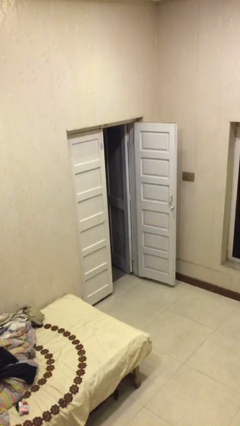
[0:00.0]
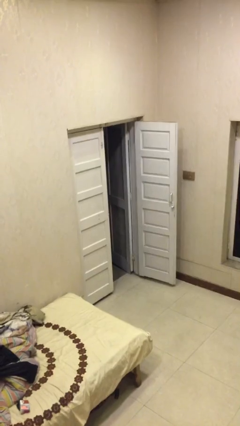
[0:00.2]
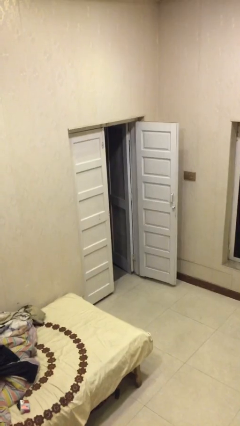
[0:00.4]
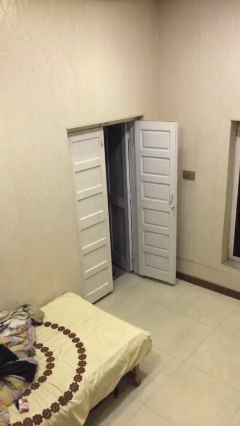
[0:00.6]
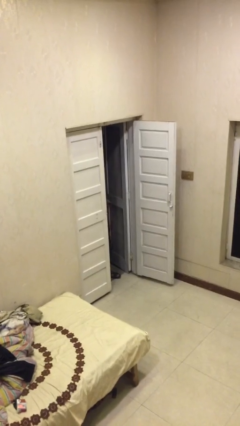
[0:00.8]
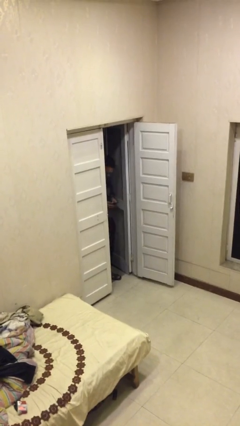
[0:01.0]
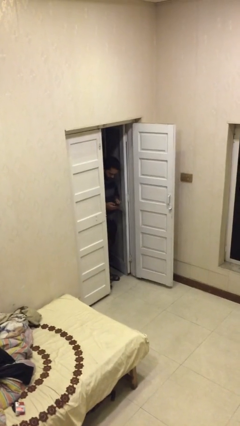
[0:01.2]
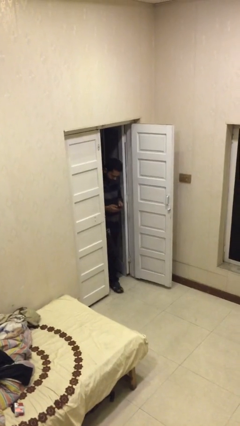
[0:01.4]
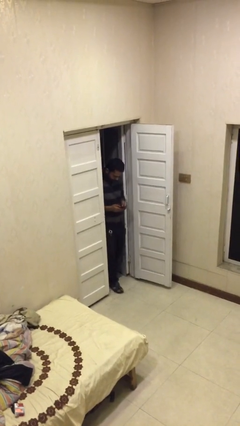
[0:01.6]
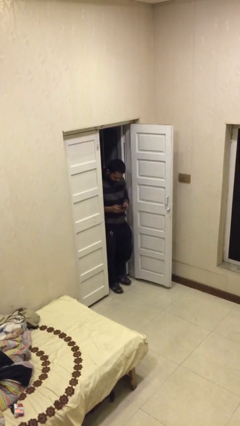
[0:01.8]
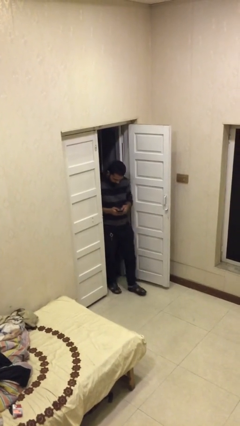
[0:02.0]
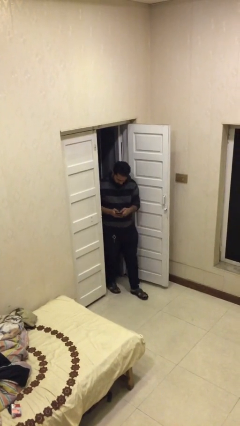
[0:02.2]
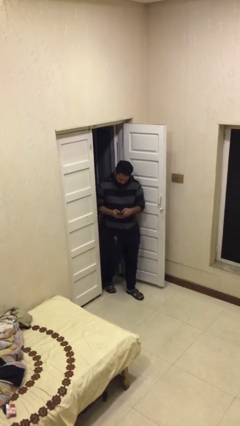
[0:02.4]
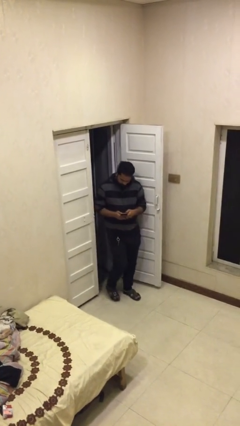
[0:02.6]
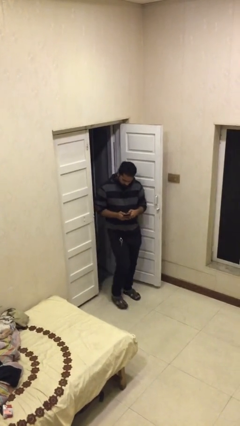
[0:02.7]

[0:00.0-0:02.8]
person enters scene through structure

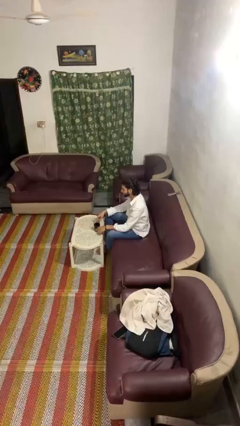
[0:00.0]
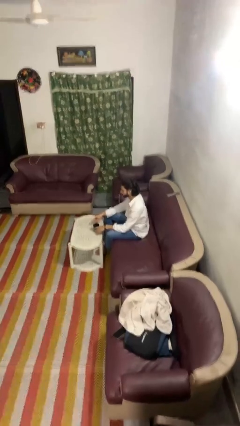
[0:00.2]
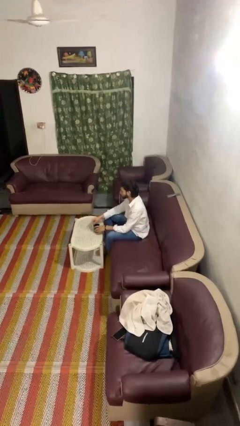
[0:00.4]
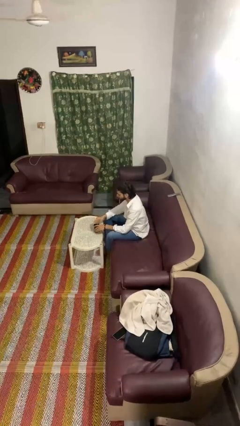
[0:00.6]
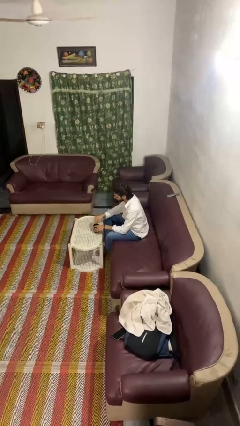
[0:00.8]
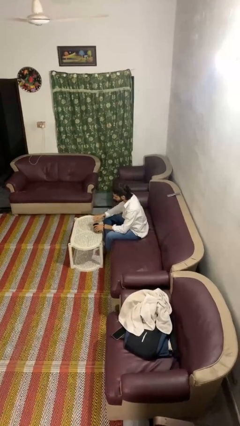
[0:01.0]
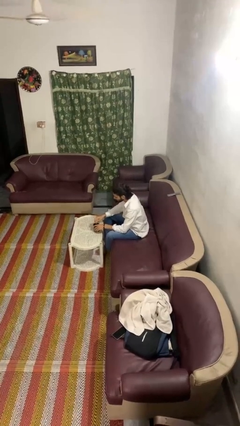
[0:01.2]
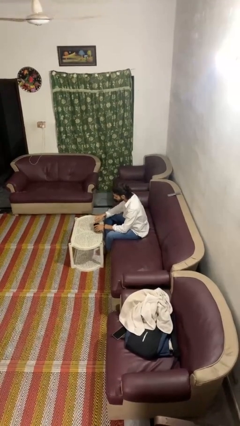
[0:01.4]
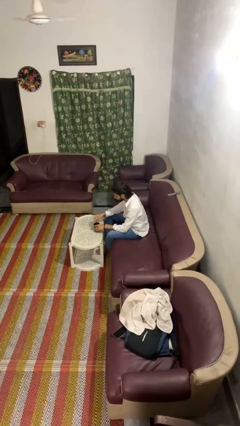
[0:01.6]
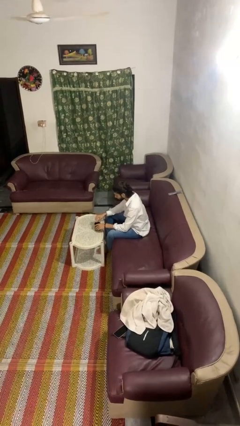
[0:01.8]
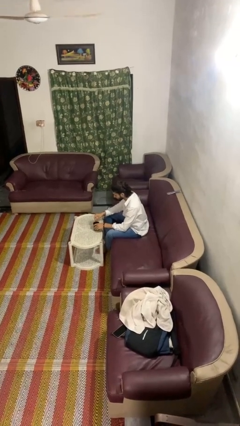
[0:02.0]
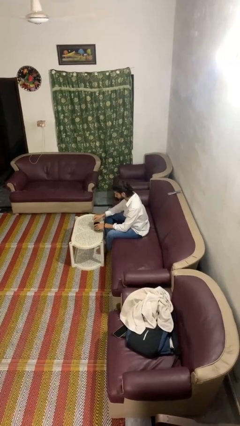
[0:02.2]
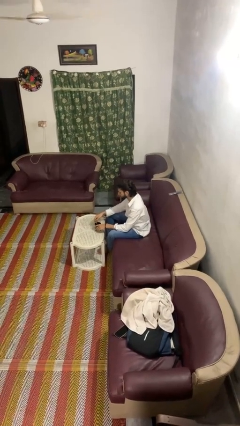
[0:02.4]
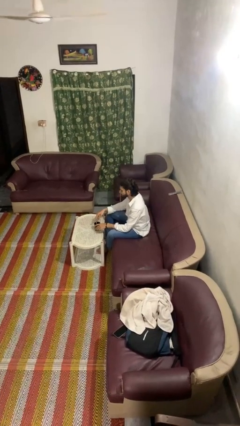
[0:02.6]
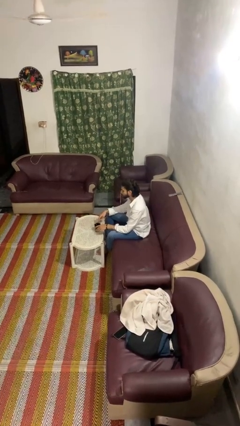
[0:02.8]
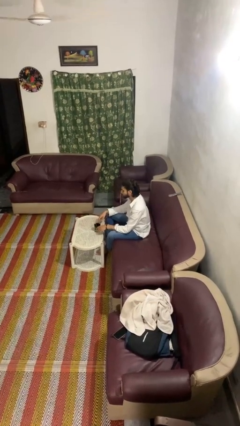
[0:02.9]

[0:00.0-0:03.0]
person stirs mug

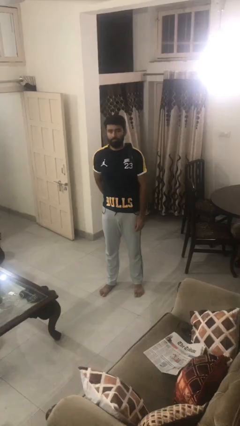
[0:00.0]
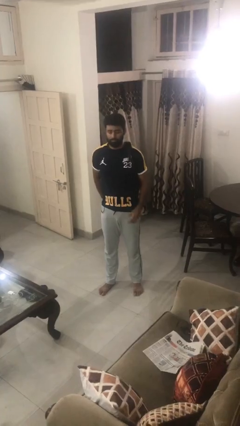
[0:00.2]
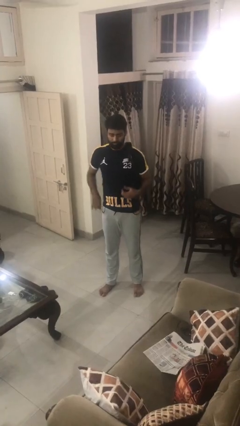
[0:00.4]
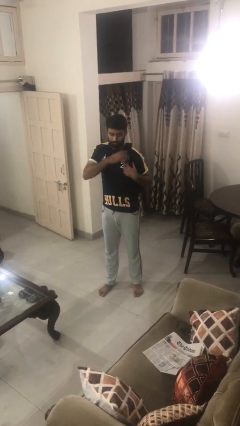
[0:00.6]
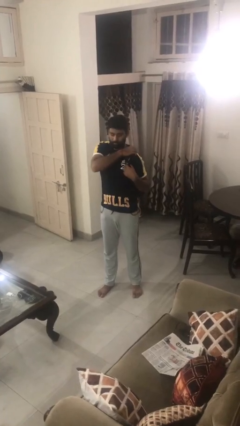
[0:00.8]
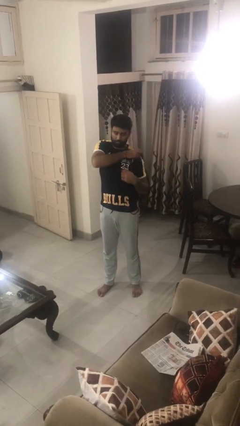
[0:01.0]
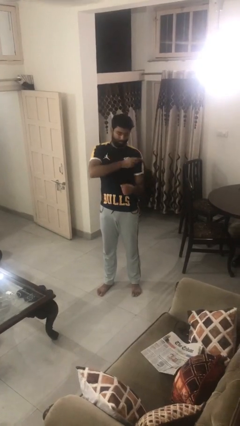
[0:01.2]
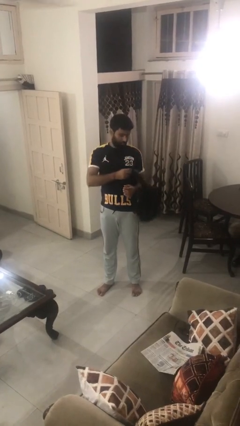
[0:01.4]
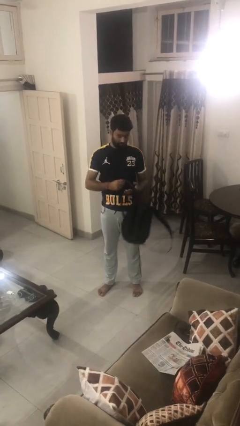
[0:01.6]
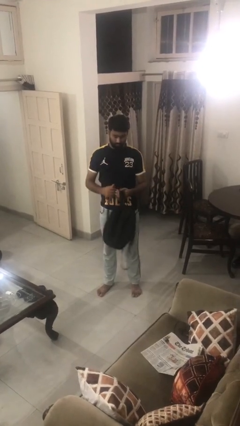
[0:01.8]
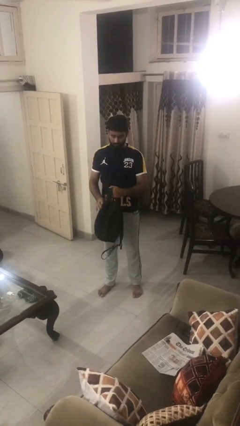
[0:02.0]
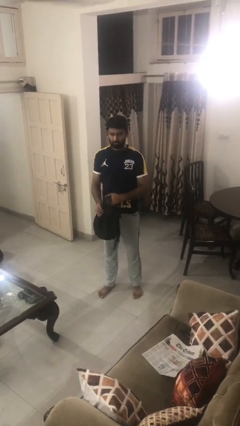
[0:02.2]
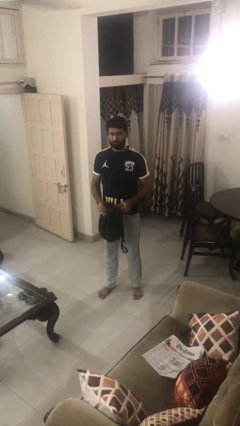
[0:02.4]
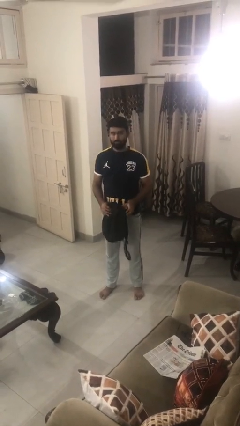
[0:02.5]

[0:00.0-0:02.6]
person takes off backpack

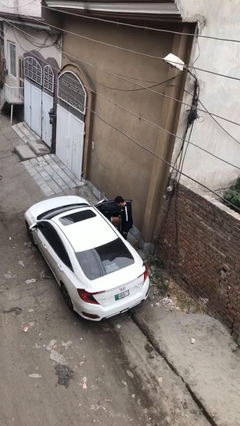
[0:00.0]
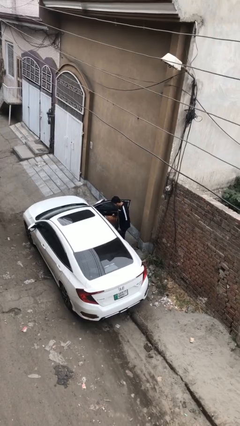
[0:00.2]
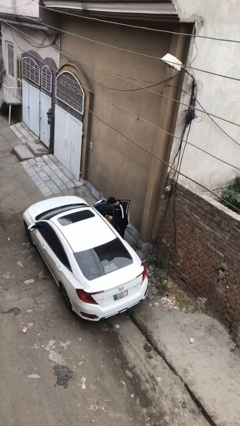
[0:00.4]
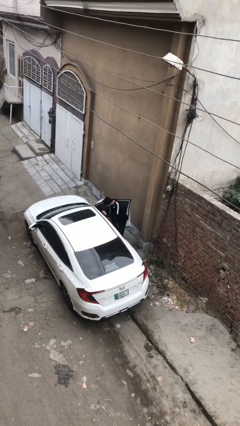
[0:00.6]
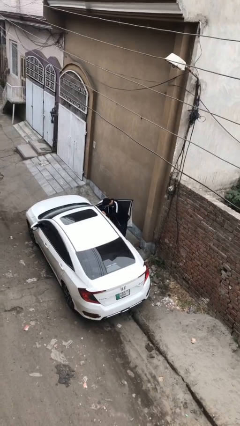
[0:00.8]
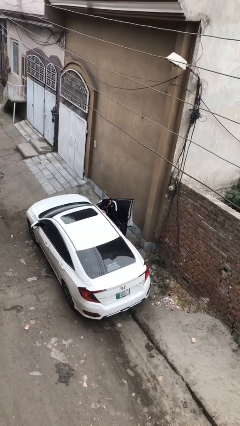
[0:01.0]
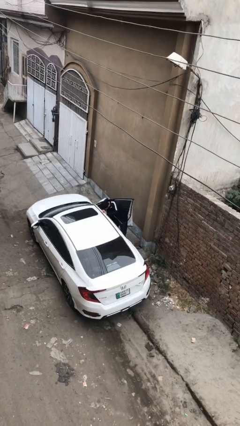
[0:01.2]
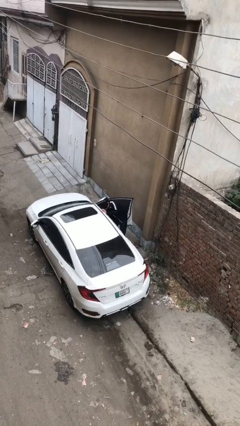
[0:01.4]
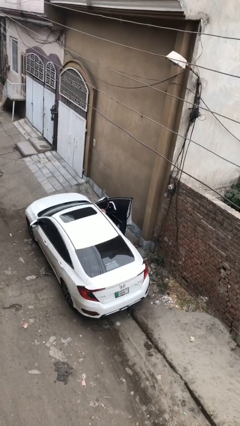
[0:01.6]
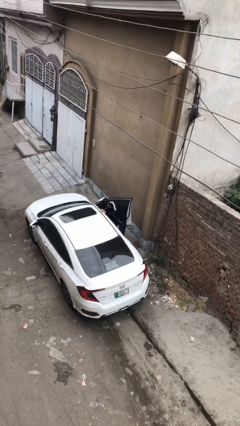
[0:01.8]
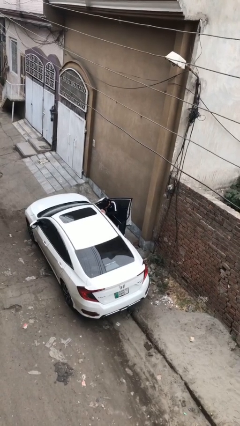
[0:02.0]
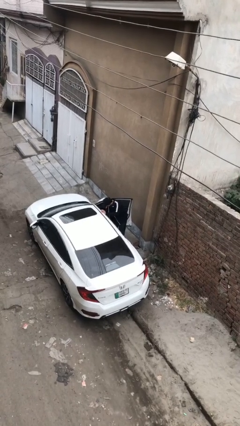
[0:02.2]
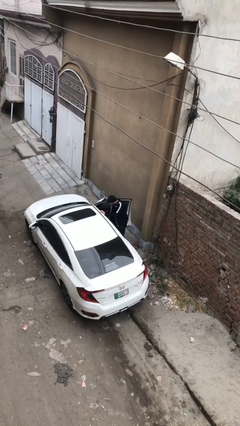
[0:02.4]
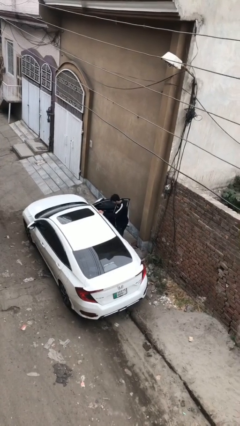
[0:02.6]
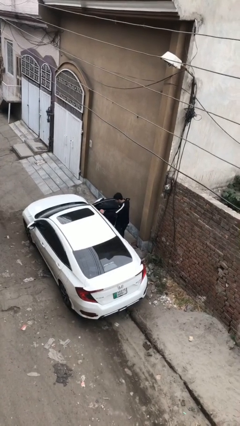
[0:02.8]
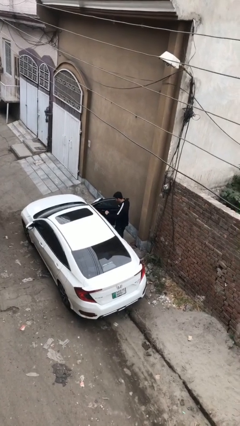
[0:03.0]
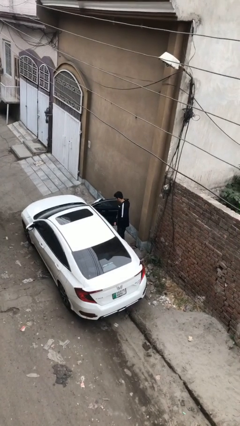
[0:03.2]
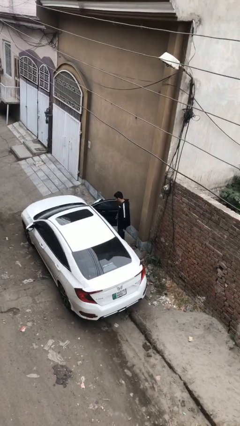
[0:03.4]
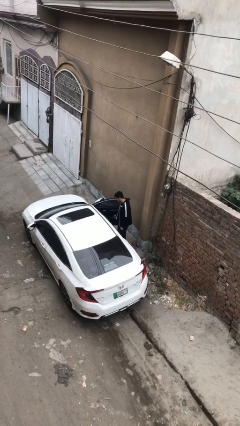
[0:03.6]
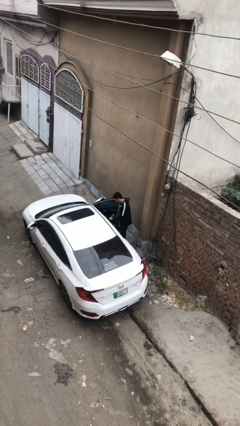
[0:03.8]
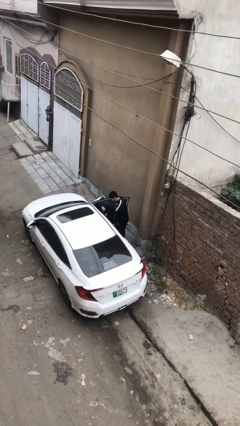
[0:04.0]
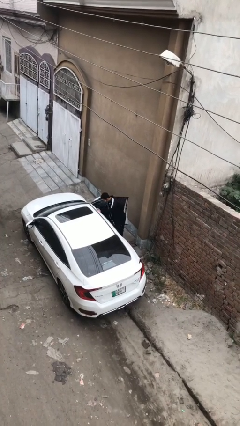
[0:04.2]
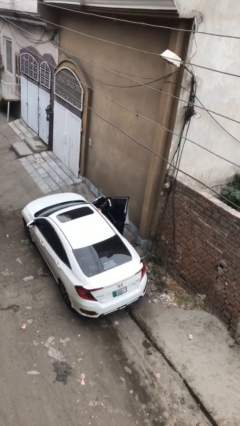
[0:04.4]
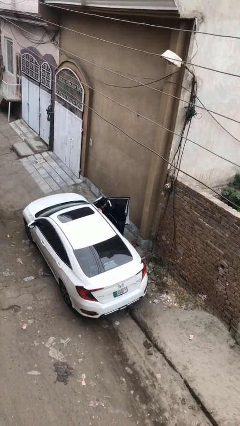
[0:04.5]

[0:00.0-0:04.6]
person loads car

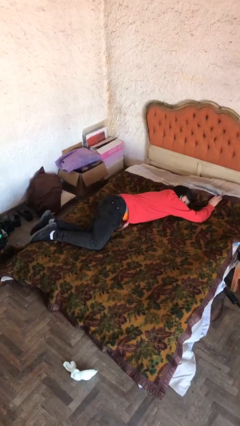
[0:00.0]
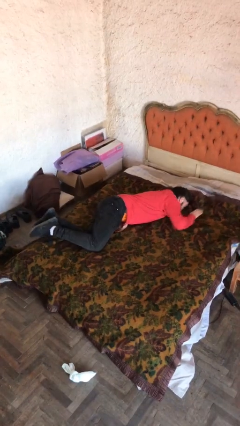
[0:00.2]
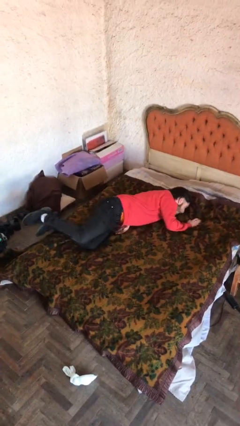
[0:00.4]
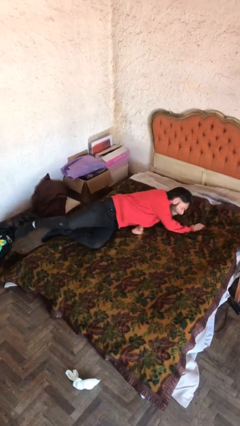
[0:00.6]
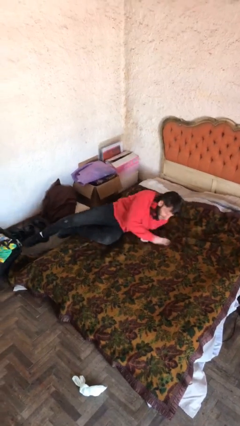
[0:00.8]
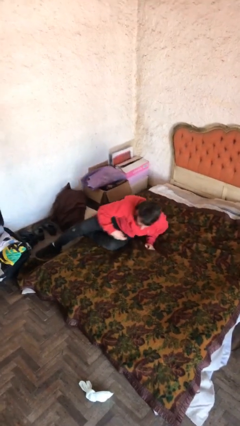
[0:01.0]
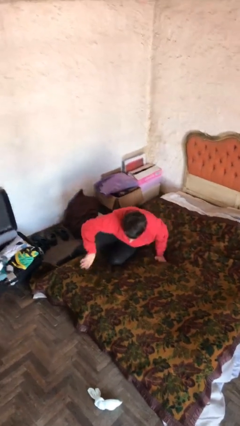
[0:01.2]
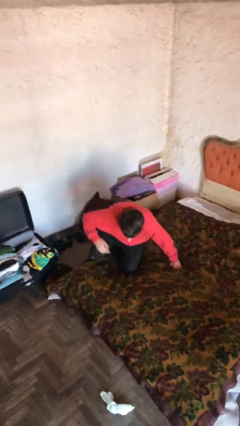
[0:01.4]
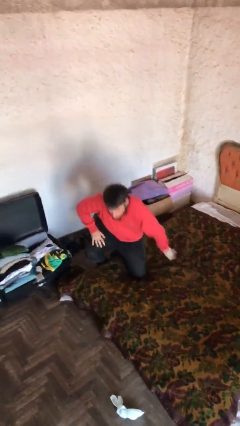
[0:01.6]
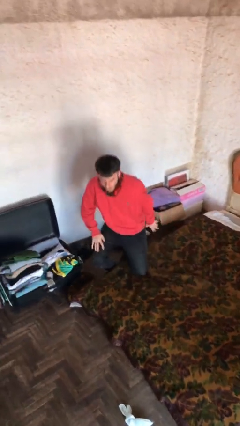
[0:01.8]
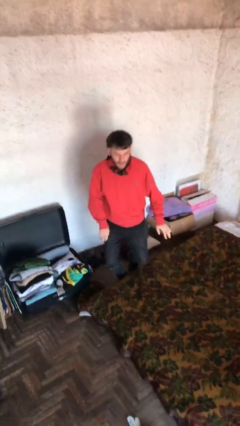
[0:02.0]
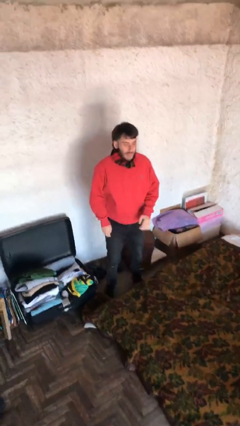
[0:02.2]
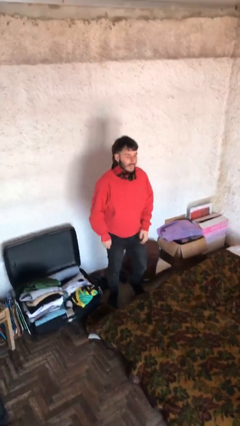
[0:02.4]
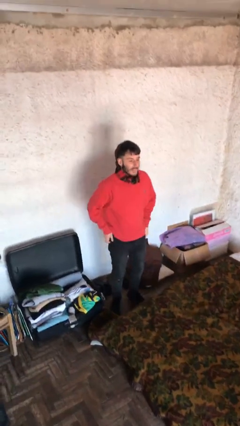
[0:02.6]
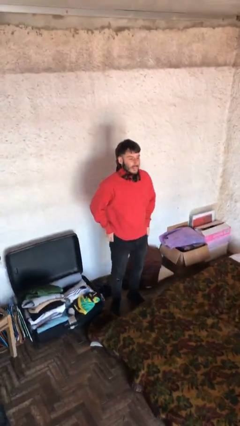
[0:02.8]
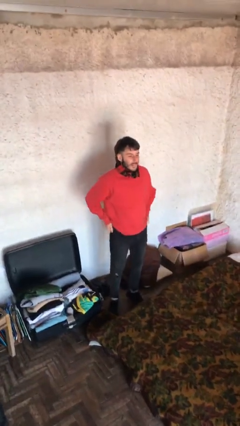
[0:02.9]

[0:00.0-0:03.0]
person stands up

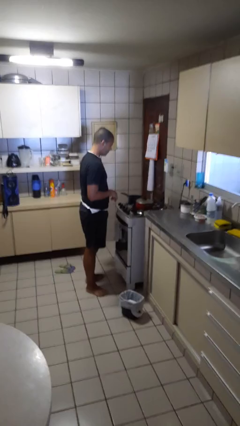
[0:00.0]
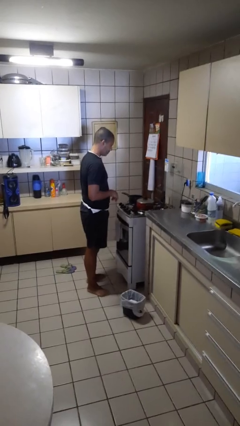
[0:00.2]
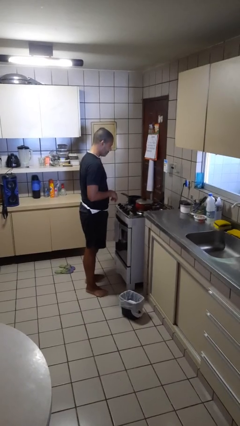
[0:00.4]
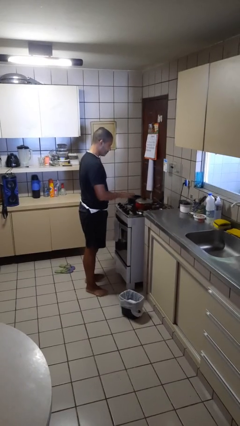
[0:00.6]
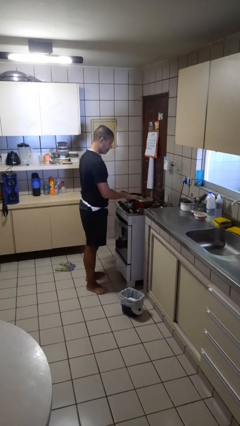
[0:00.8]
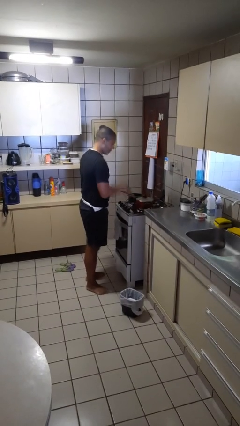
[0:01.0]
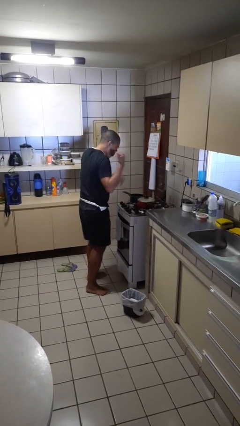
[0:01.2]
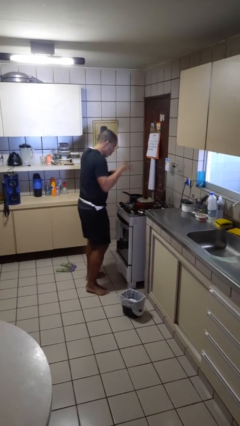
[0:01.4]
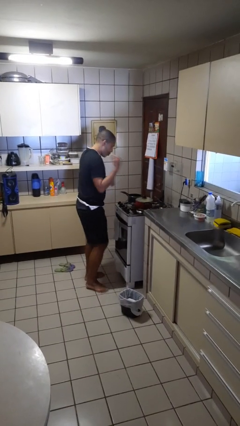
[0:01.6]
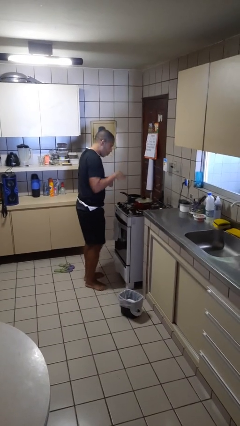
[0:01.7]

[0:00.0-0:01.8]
person burns hand
